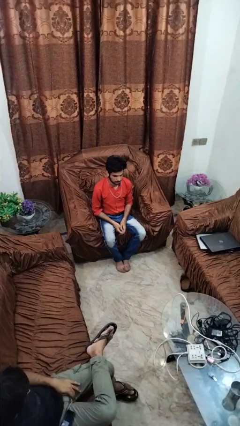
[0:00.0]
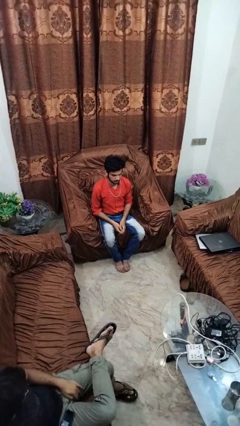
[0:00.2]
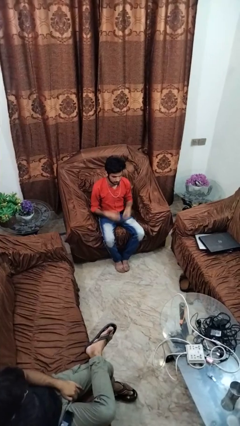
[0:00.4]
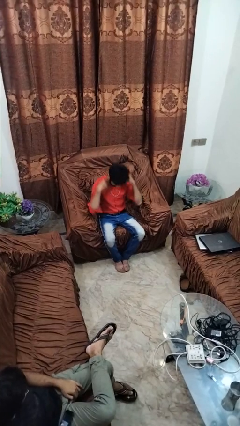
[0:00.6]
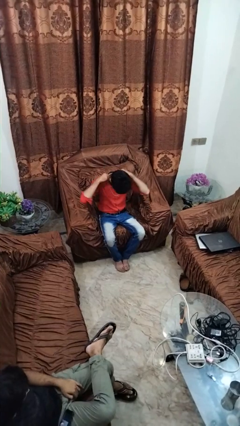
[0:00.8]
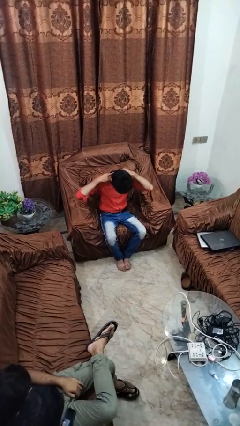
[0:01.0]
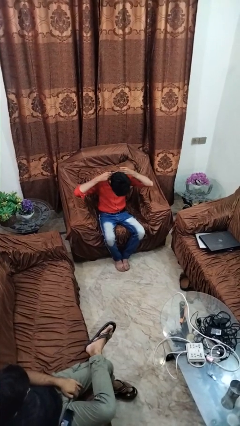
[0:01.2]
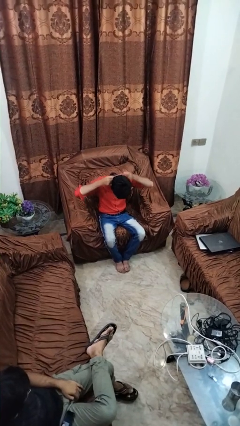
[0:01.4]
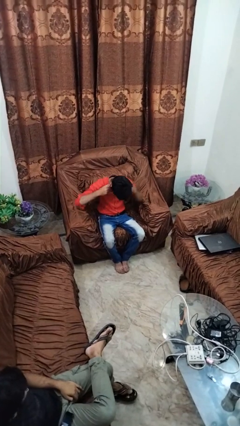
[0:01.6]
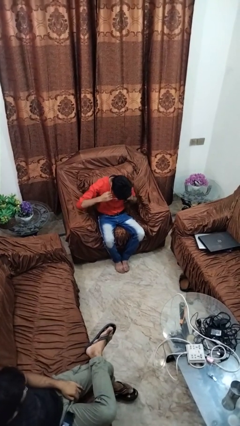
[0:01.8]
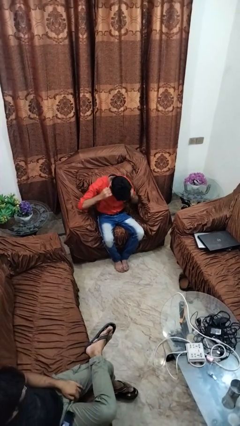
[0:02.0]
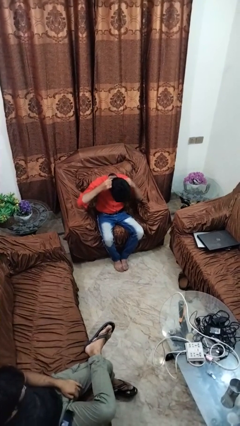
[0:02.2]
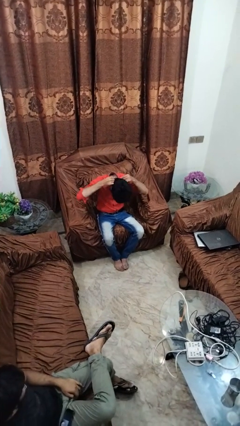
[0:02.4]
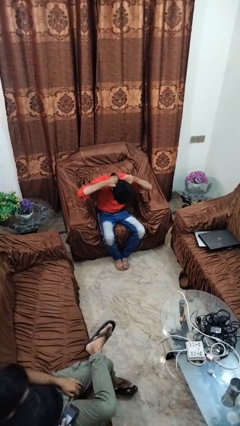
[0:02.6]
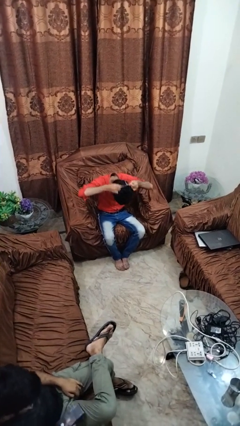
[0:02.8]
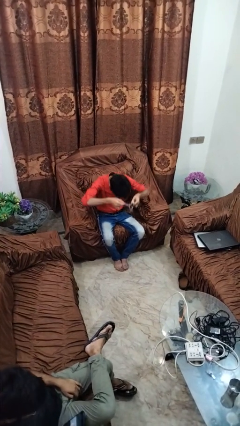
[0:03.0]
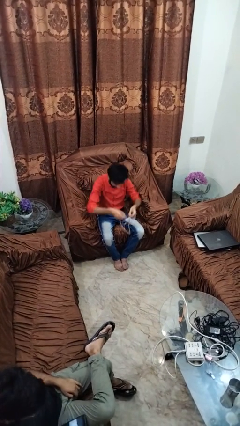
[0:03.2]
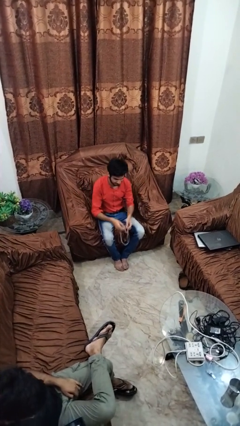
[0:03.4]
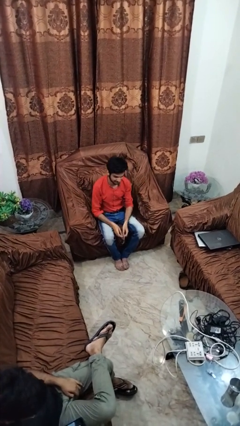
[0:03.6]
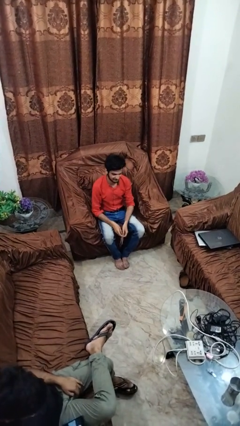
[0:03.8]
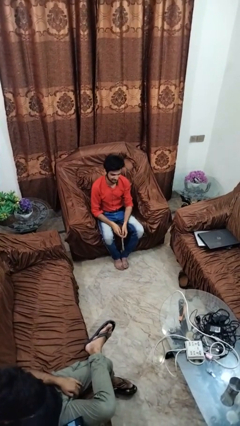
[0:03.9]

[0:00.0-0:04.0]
person takes off necklace

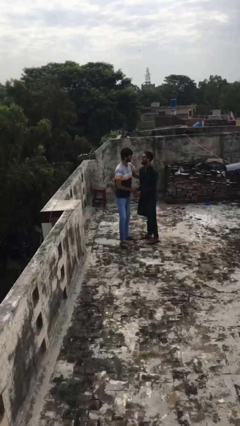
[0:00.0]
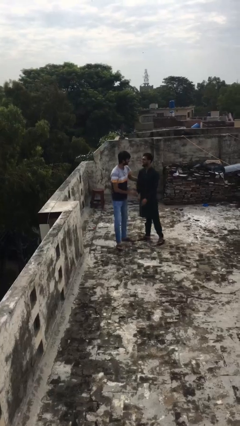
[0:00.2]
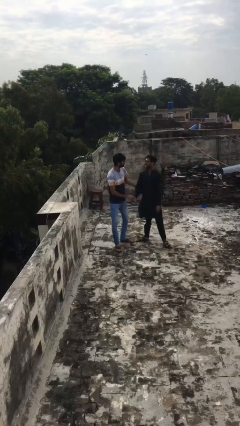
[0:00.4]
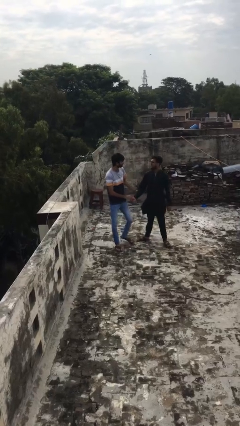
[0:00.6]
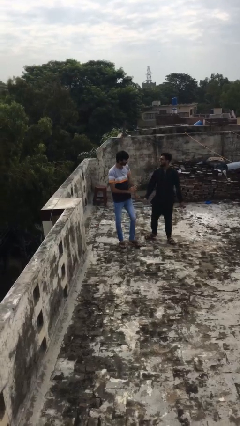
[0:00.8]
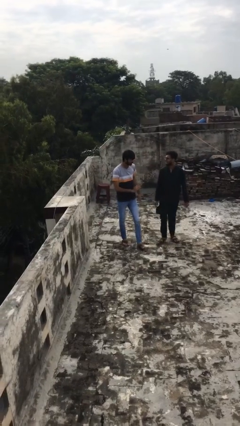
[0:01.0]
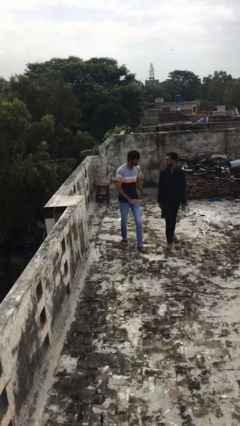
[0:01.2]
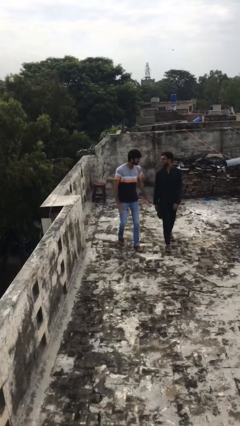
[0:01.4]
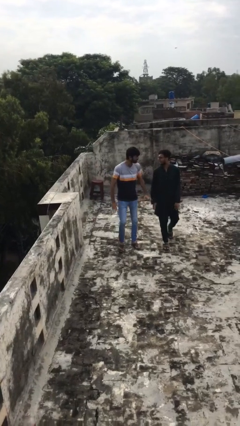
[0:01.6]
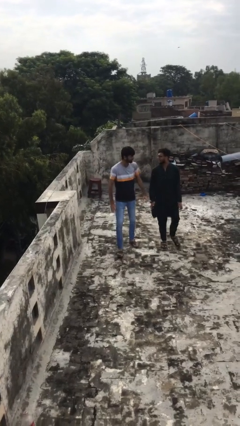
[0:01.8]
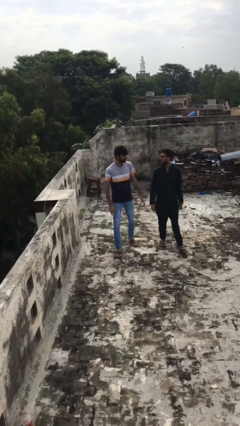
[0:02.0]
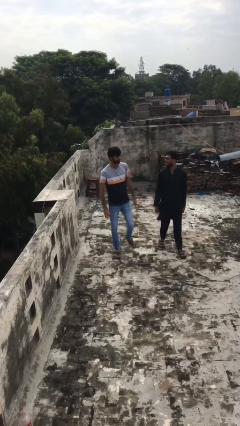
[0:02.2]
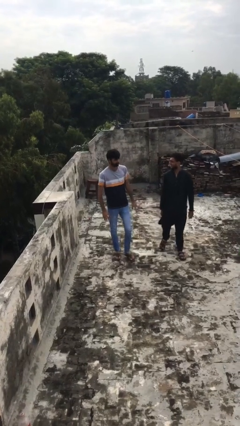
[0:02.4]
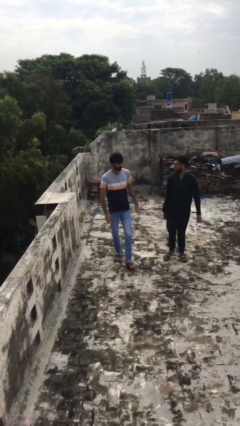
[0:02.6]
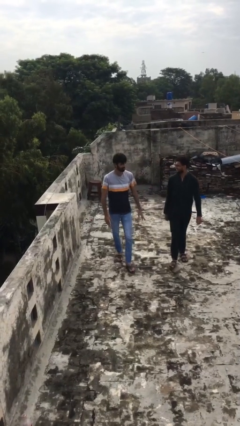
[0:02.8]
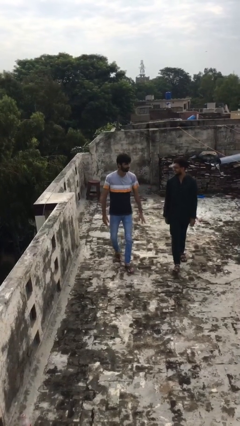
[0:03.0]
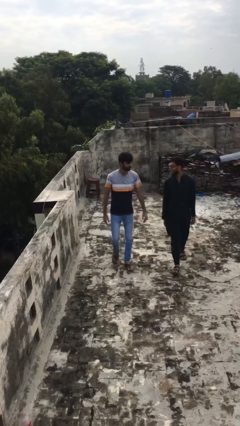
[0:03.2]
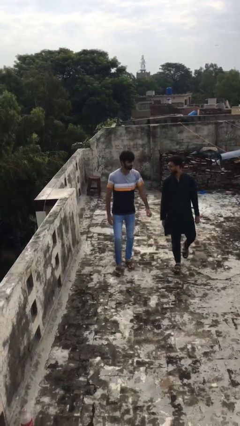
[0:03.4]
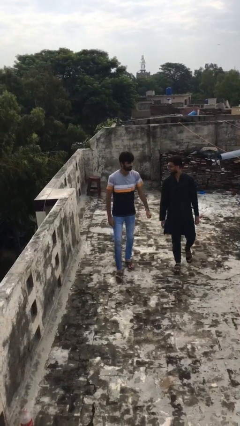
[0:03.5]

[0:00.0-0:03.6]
person talks to person

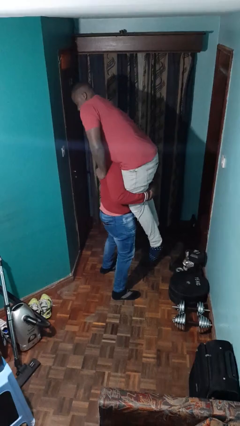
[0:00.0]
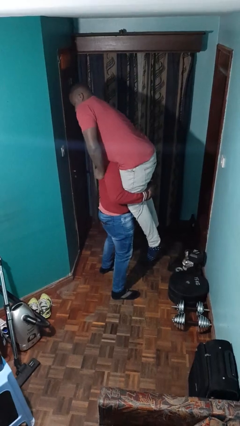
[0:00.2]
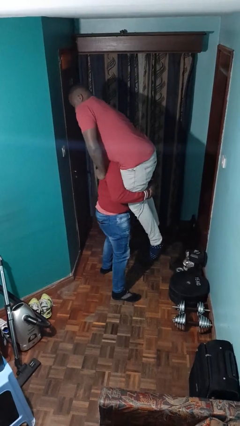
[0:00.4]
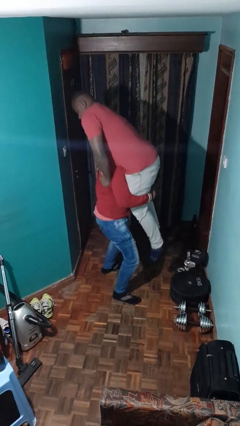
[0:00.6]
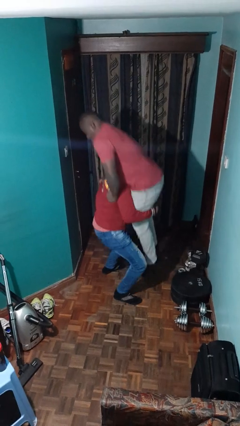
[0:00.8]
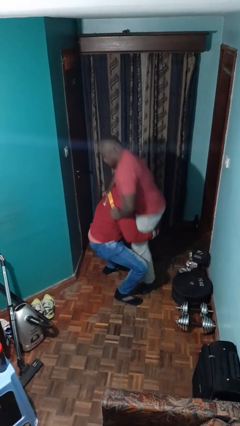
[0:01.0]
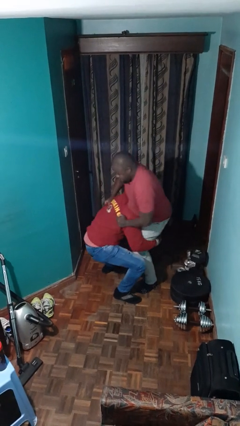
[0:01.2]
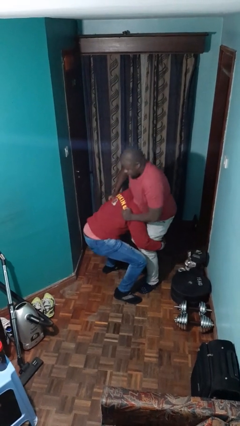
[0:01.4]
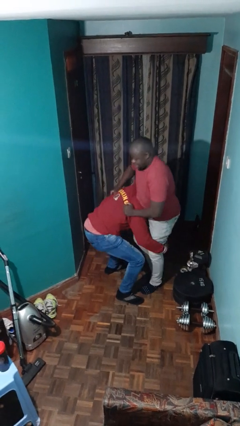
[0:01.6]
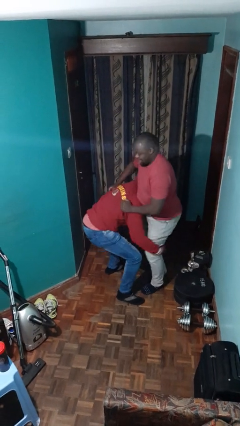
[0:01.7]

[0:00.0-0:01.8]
person puts down person

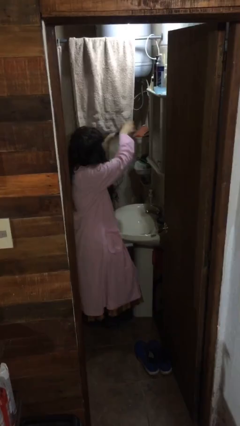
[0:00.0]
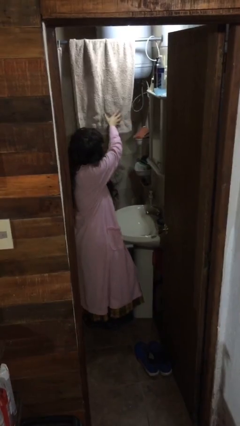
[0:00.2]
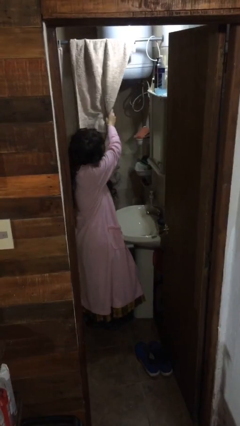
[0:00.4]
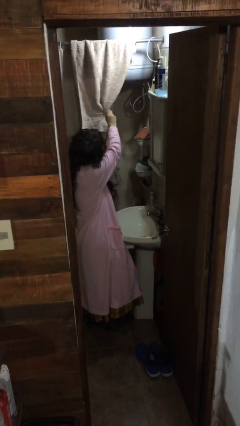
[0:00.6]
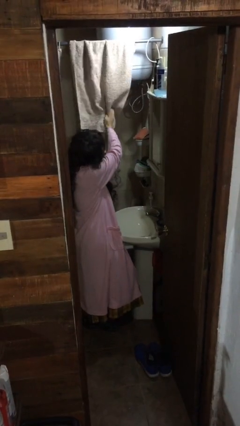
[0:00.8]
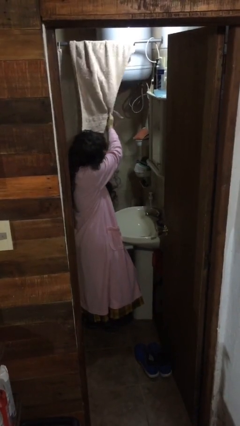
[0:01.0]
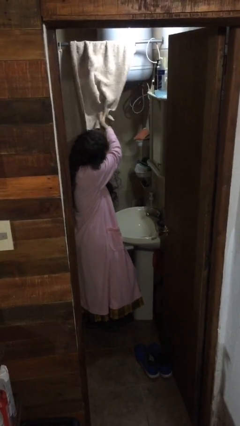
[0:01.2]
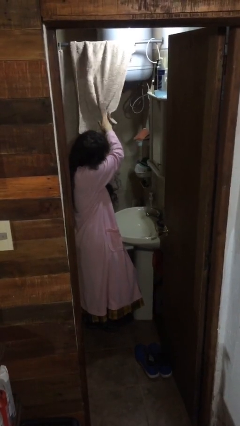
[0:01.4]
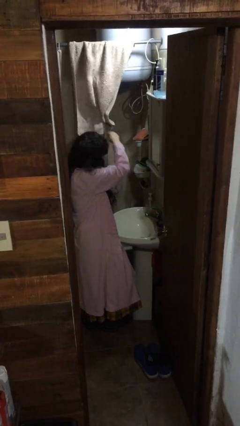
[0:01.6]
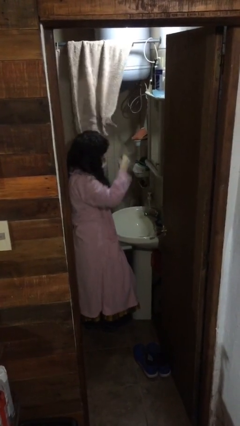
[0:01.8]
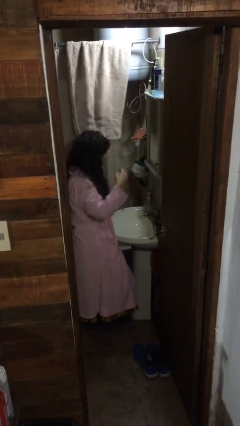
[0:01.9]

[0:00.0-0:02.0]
person dries hands with towel

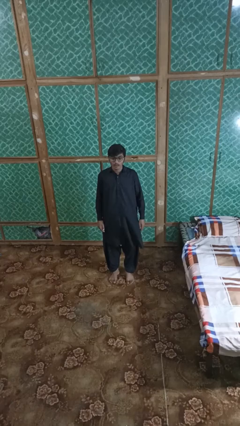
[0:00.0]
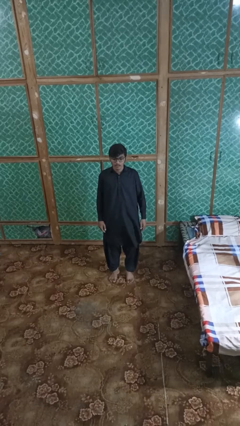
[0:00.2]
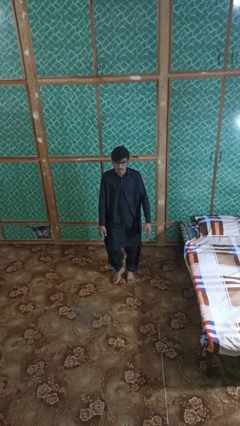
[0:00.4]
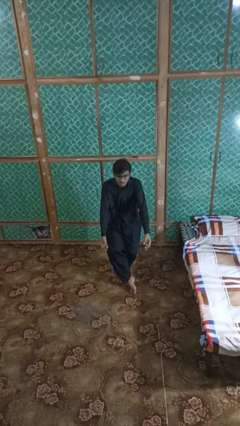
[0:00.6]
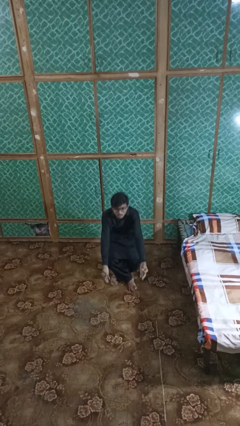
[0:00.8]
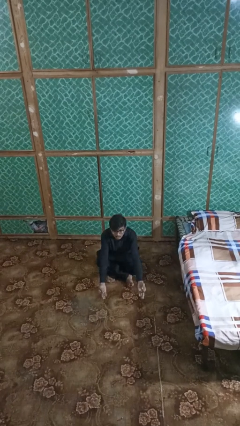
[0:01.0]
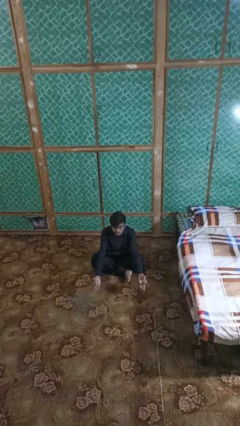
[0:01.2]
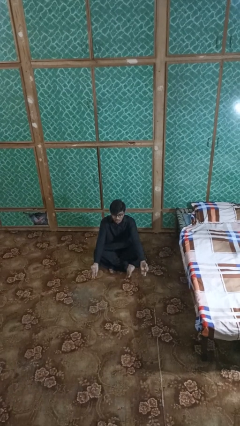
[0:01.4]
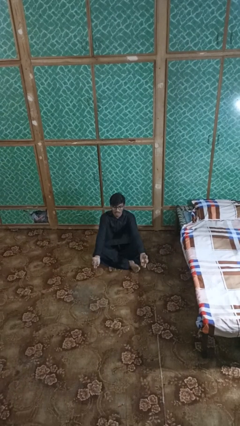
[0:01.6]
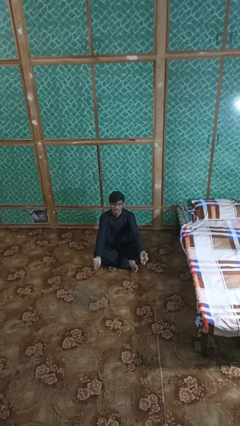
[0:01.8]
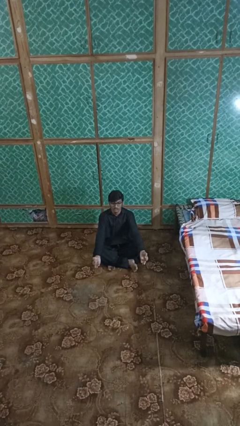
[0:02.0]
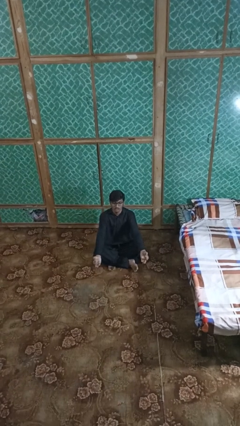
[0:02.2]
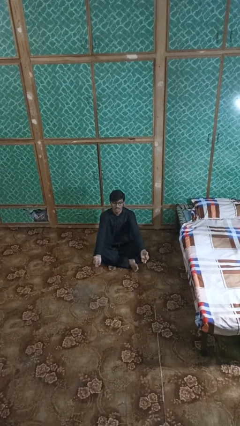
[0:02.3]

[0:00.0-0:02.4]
person sits crisscross

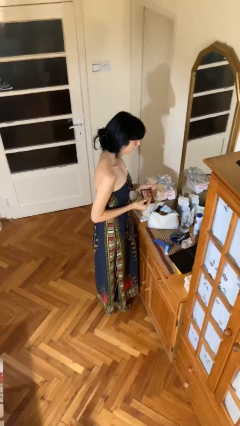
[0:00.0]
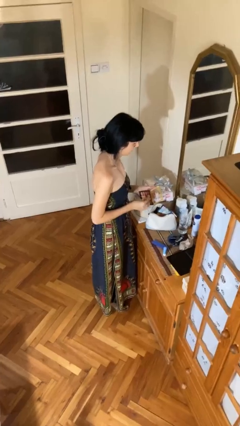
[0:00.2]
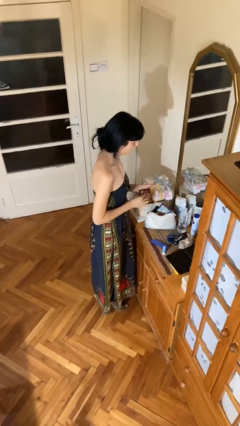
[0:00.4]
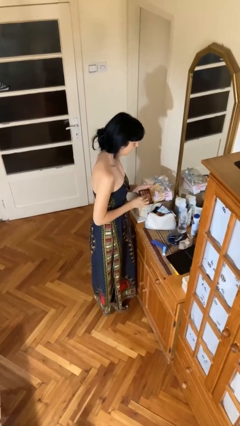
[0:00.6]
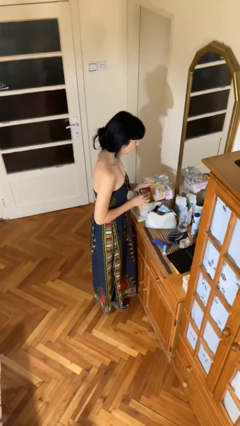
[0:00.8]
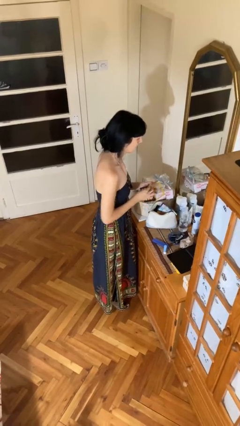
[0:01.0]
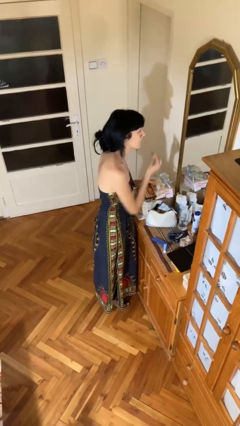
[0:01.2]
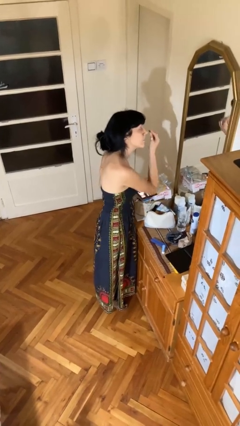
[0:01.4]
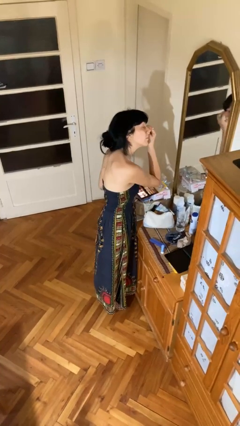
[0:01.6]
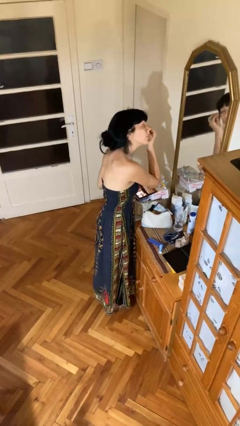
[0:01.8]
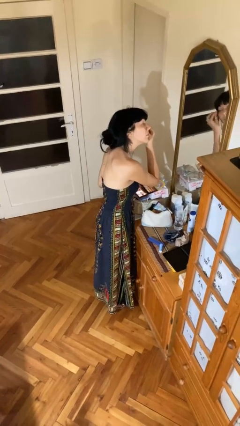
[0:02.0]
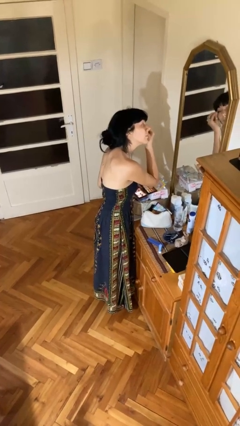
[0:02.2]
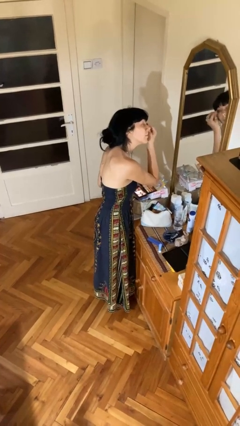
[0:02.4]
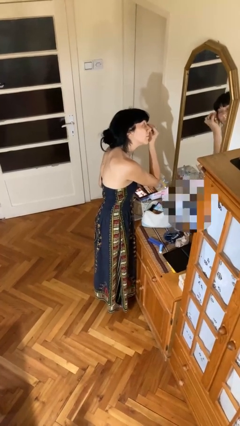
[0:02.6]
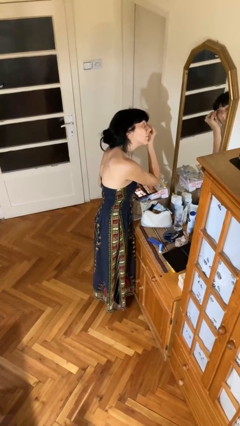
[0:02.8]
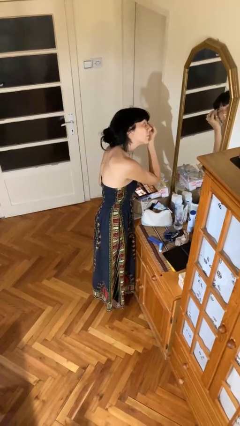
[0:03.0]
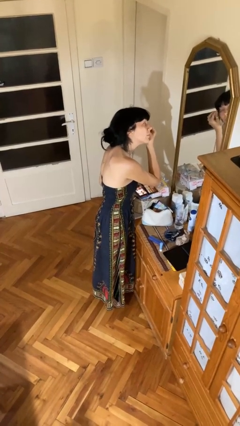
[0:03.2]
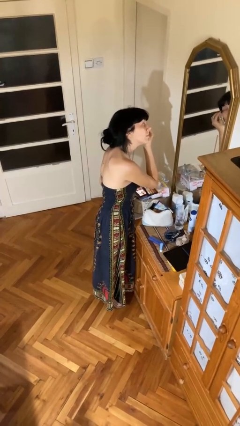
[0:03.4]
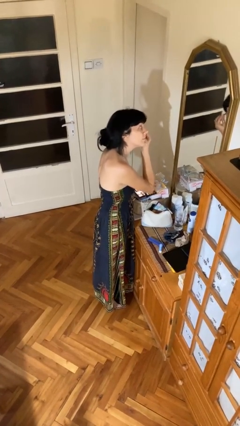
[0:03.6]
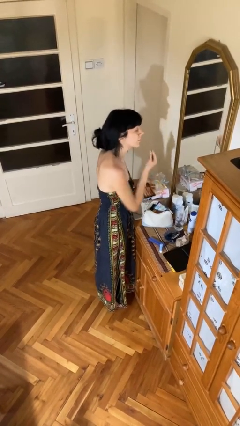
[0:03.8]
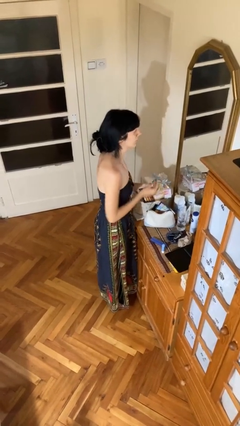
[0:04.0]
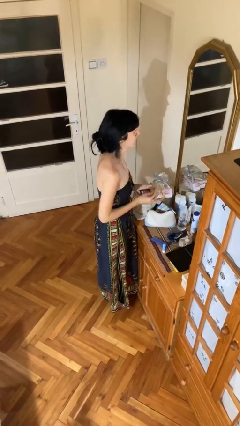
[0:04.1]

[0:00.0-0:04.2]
person applies eye makeup
